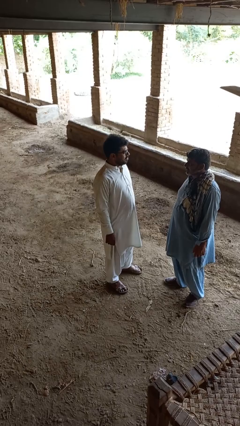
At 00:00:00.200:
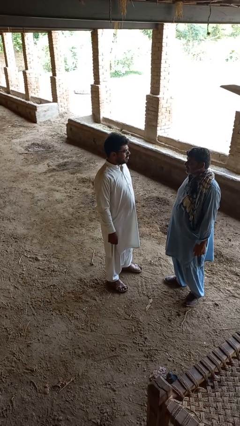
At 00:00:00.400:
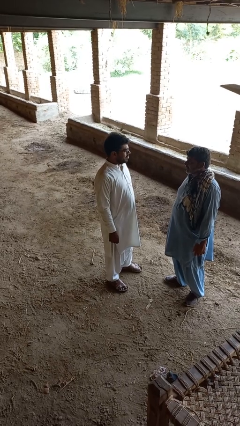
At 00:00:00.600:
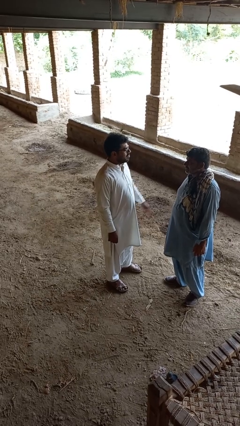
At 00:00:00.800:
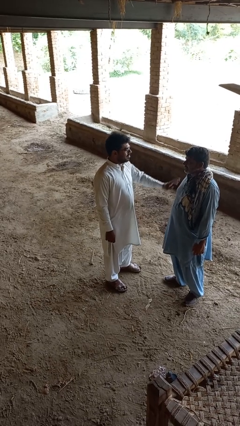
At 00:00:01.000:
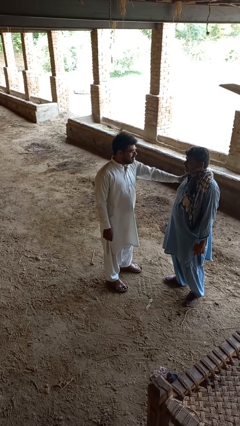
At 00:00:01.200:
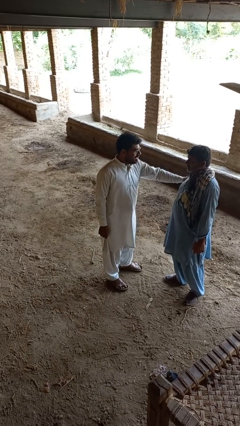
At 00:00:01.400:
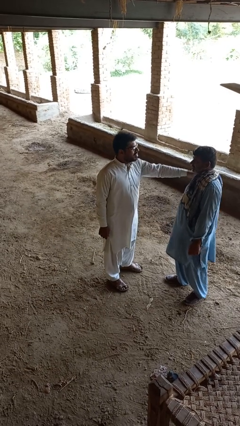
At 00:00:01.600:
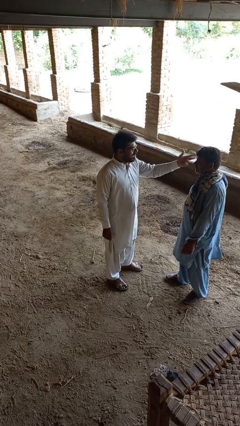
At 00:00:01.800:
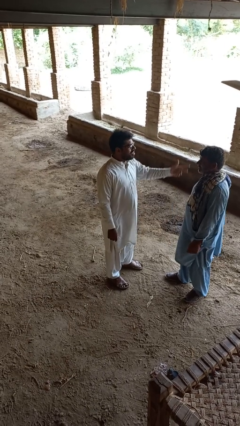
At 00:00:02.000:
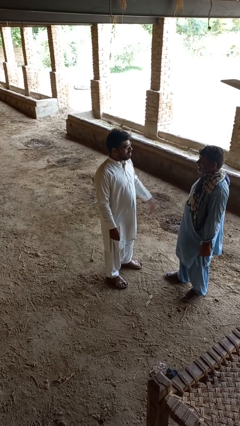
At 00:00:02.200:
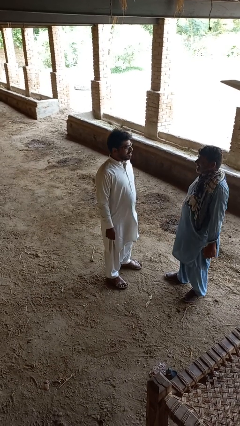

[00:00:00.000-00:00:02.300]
person shoves person

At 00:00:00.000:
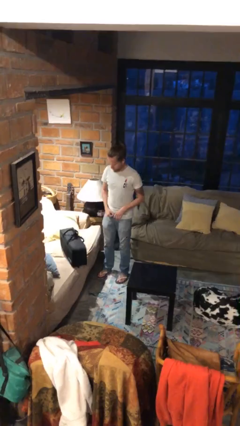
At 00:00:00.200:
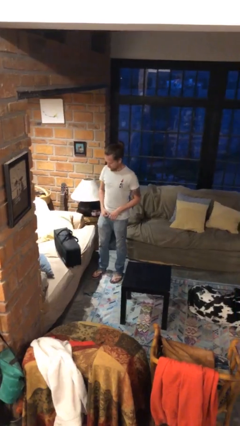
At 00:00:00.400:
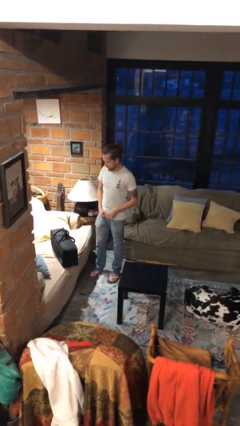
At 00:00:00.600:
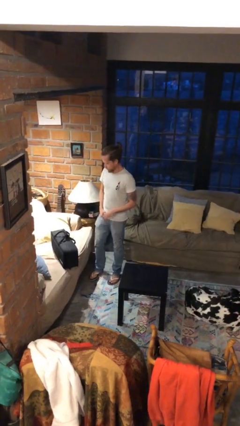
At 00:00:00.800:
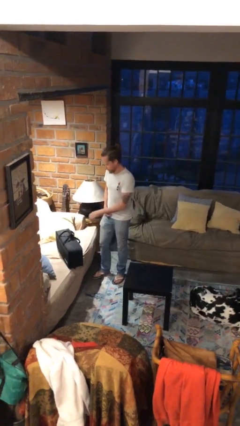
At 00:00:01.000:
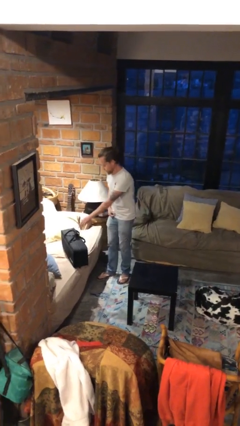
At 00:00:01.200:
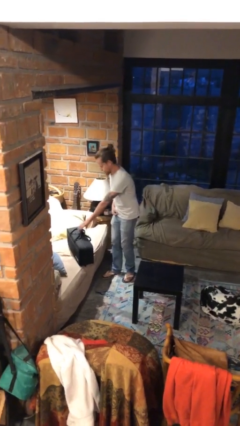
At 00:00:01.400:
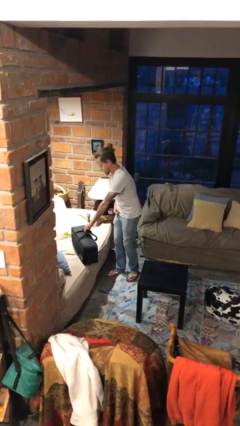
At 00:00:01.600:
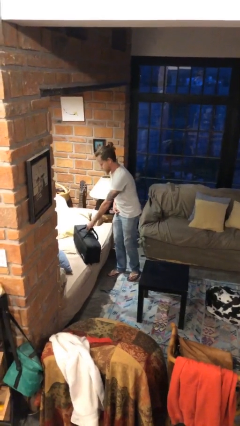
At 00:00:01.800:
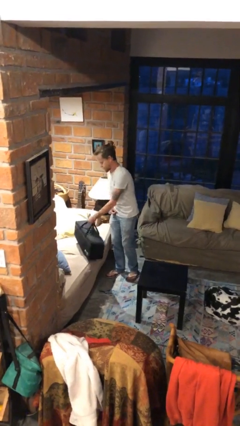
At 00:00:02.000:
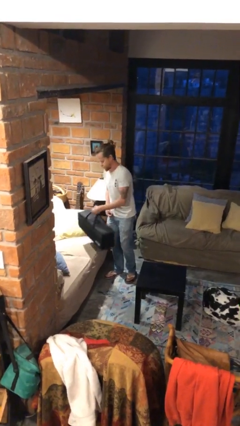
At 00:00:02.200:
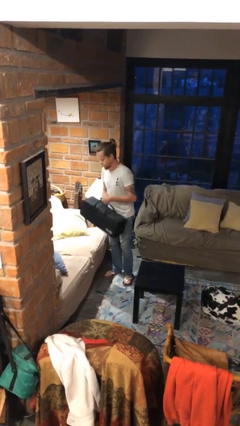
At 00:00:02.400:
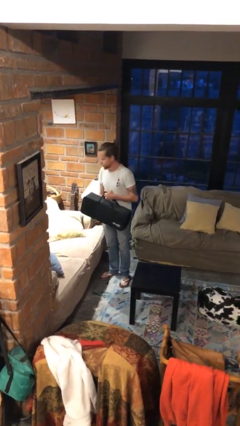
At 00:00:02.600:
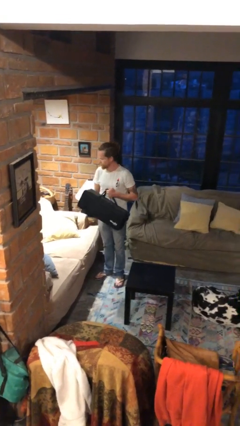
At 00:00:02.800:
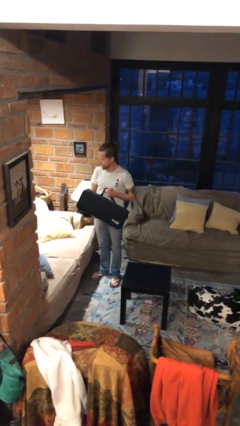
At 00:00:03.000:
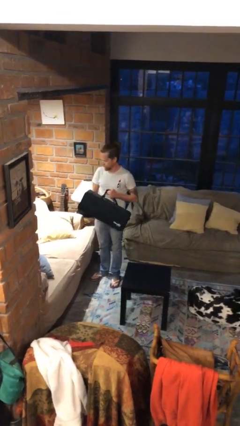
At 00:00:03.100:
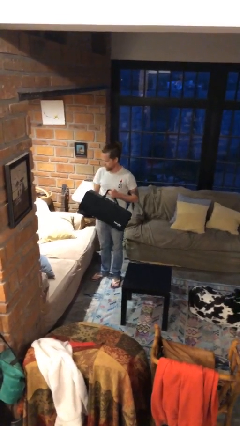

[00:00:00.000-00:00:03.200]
person picks up object from couch

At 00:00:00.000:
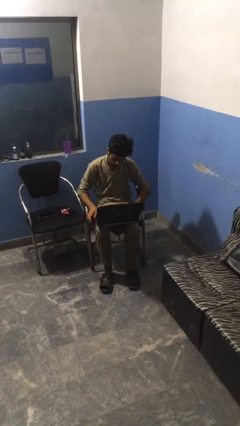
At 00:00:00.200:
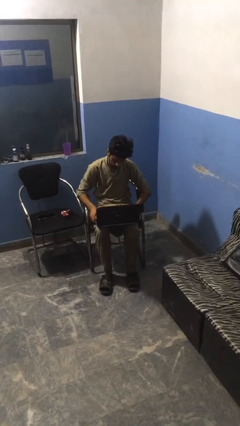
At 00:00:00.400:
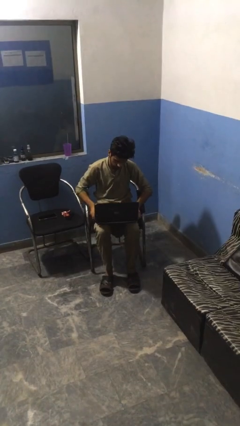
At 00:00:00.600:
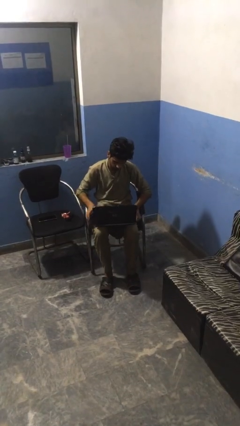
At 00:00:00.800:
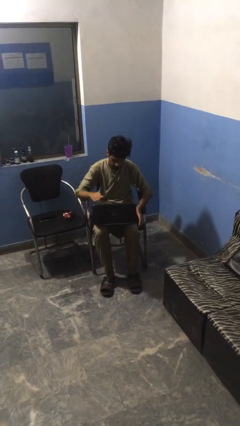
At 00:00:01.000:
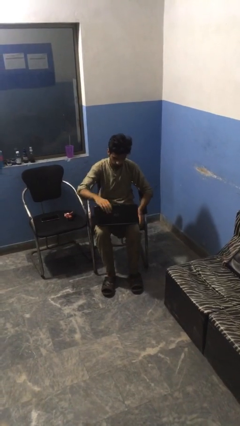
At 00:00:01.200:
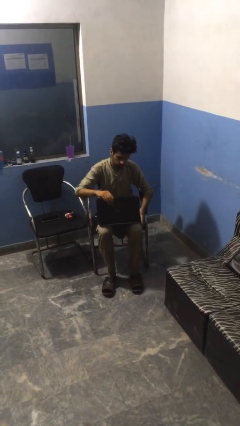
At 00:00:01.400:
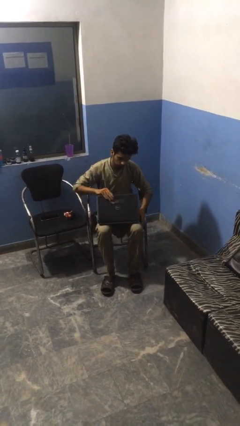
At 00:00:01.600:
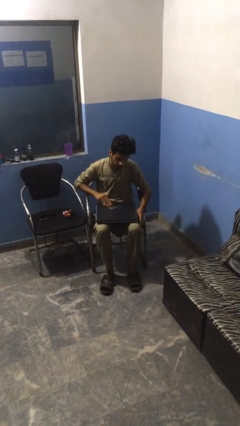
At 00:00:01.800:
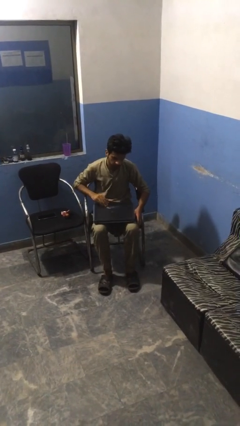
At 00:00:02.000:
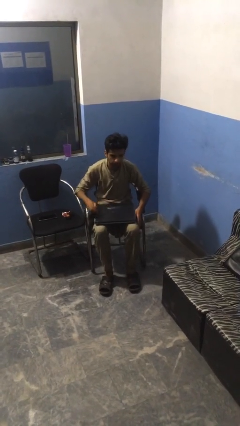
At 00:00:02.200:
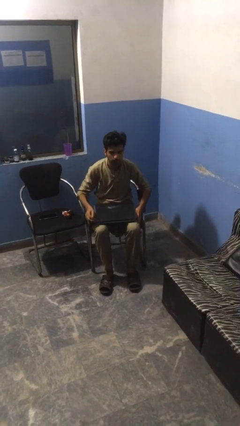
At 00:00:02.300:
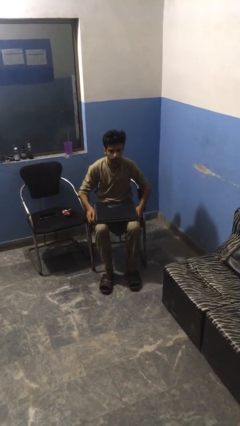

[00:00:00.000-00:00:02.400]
person closes laptop

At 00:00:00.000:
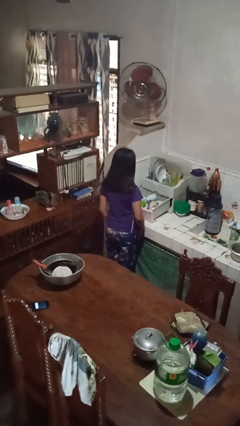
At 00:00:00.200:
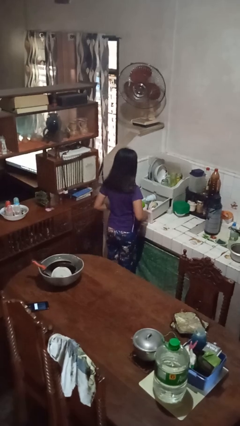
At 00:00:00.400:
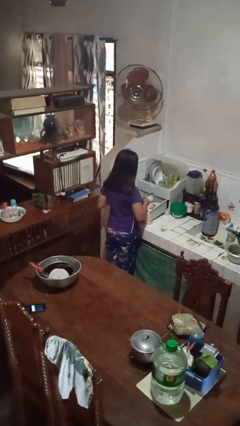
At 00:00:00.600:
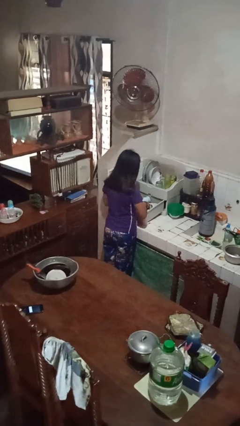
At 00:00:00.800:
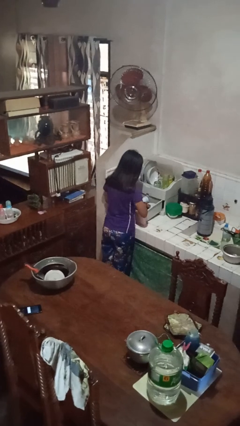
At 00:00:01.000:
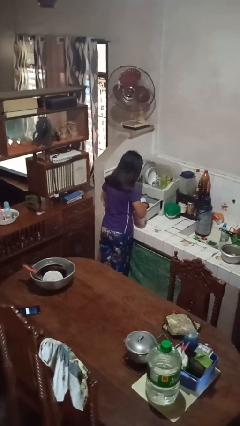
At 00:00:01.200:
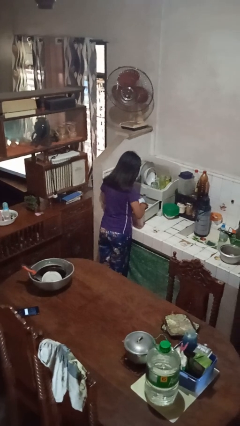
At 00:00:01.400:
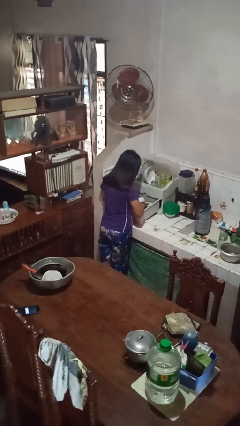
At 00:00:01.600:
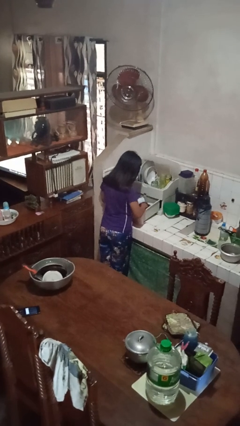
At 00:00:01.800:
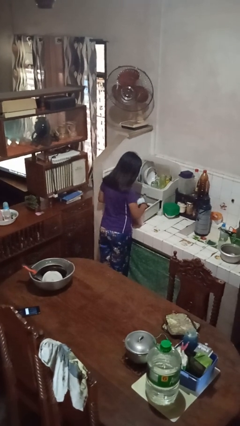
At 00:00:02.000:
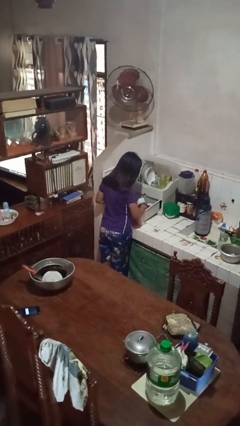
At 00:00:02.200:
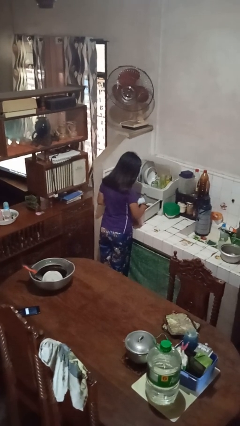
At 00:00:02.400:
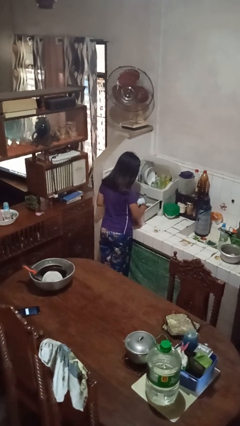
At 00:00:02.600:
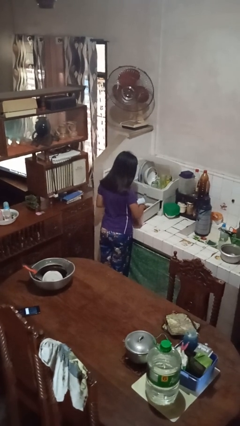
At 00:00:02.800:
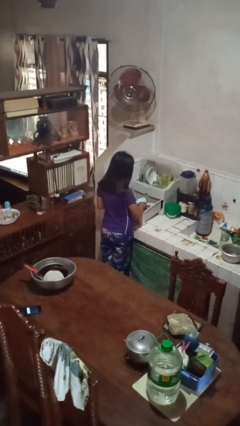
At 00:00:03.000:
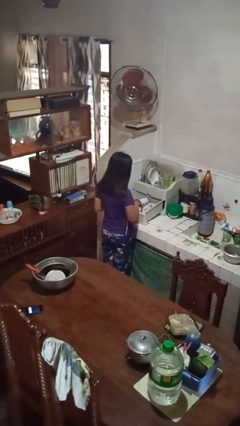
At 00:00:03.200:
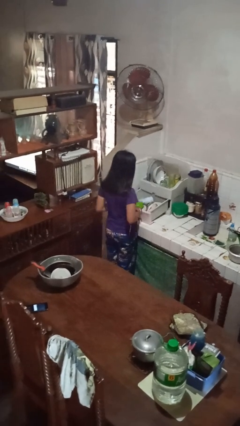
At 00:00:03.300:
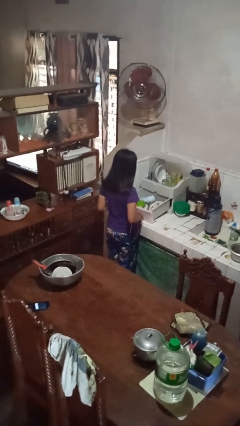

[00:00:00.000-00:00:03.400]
person searches in kitchen drawer

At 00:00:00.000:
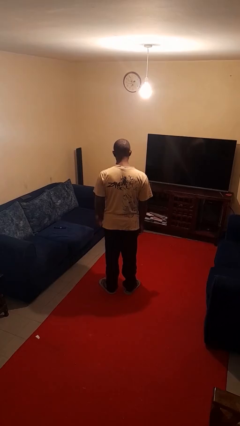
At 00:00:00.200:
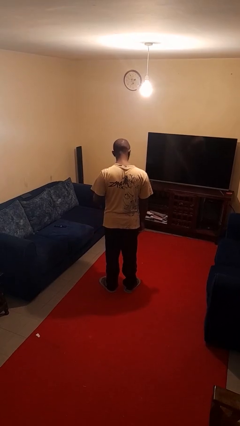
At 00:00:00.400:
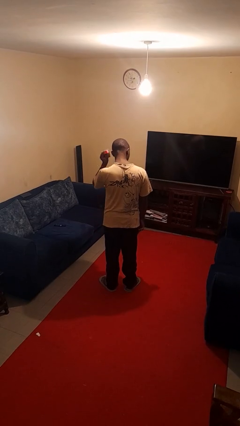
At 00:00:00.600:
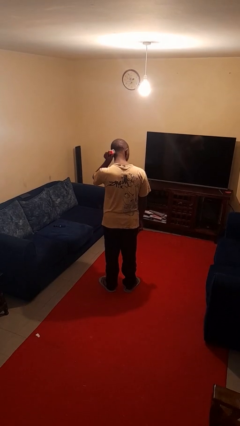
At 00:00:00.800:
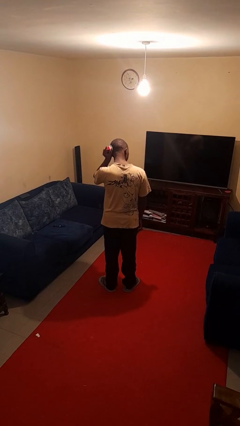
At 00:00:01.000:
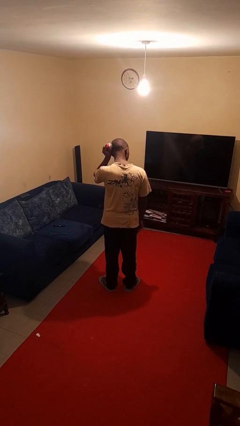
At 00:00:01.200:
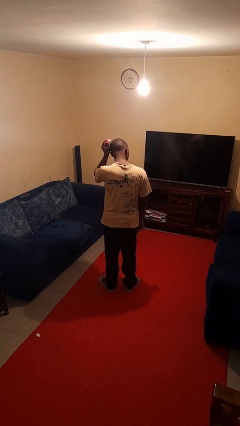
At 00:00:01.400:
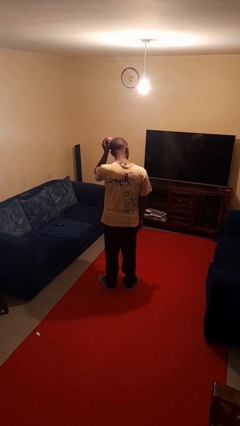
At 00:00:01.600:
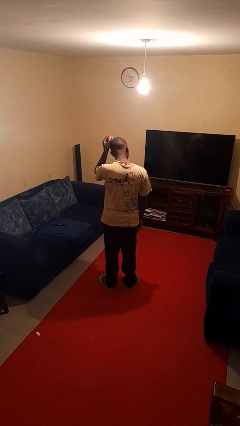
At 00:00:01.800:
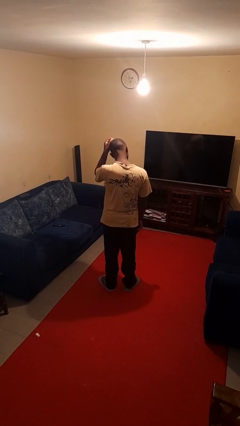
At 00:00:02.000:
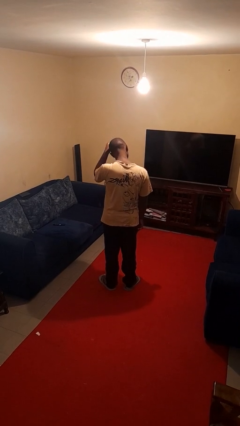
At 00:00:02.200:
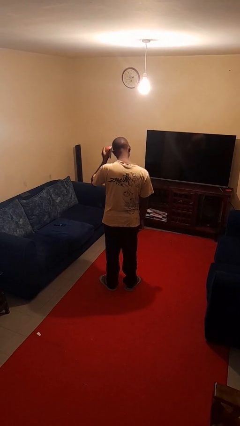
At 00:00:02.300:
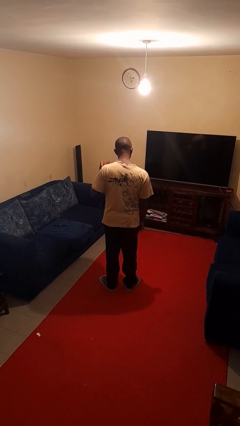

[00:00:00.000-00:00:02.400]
person brushes hair

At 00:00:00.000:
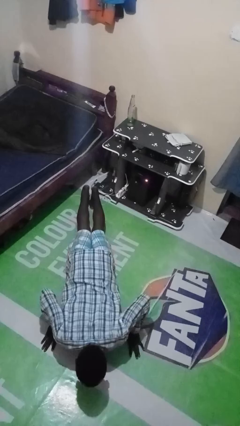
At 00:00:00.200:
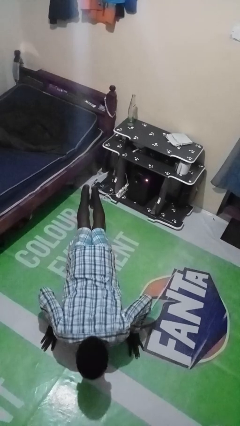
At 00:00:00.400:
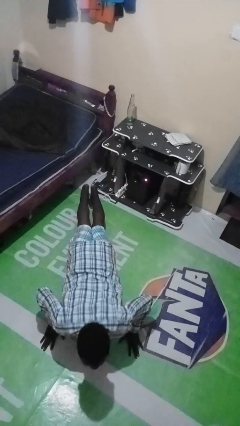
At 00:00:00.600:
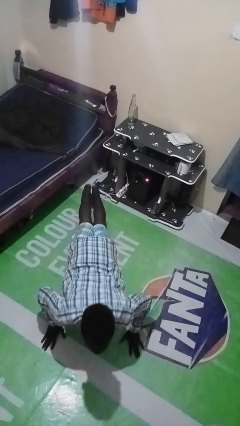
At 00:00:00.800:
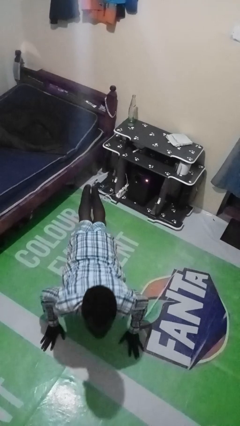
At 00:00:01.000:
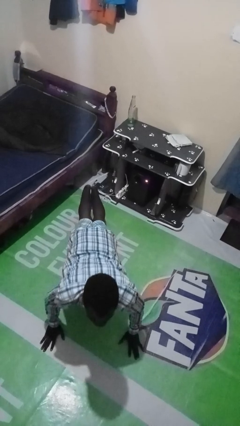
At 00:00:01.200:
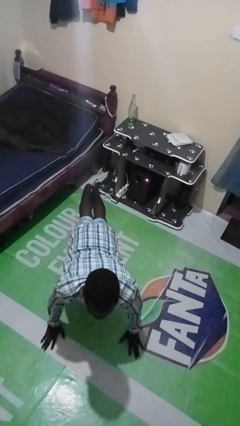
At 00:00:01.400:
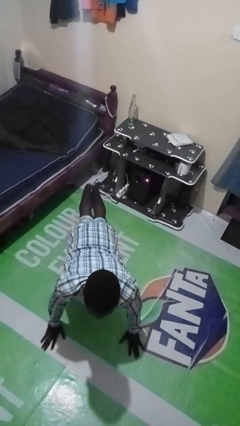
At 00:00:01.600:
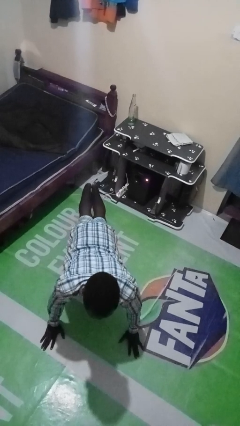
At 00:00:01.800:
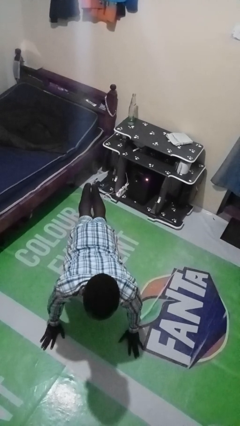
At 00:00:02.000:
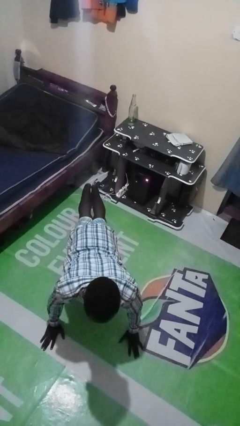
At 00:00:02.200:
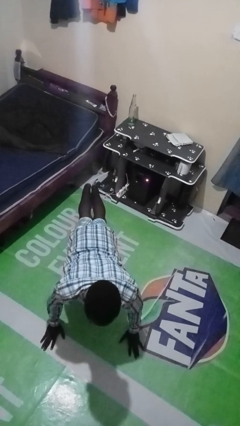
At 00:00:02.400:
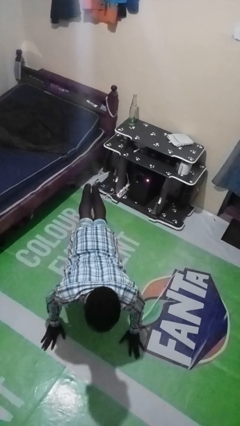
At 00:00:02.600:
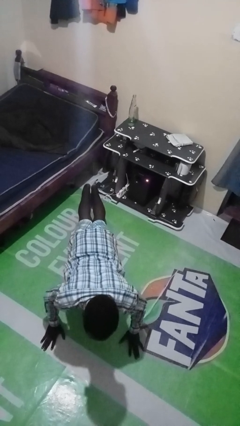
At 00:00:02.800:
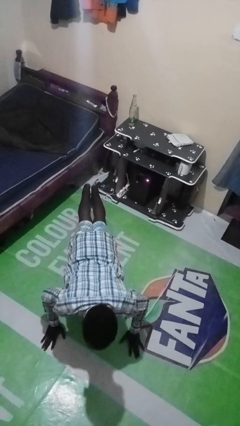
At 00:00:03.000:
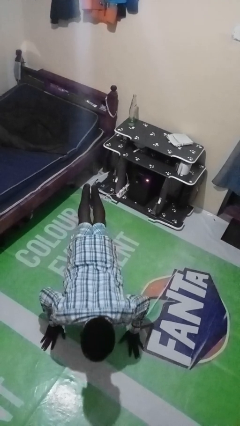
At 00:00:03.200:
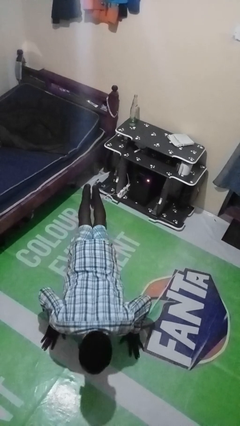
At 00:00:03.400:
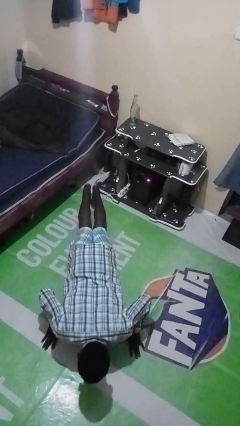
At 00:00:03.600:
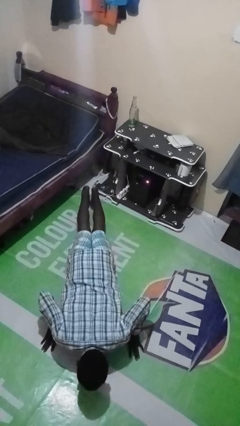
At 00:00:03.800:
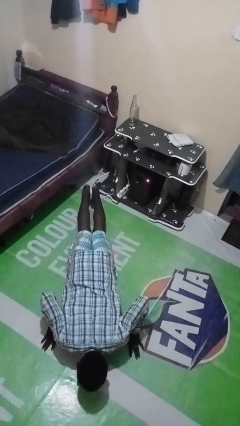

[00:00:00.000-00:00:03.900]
person exercises with pushup
